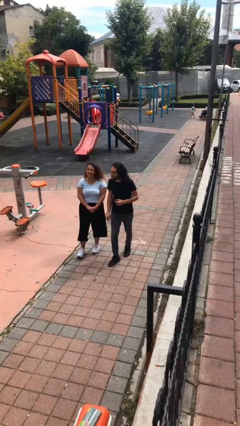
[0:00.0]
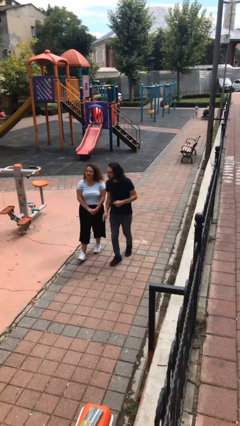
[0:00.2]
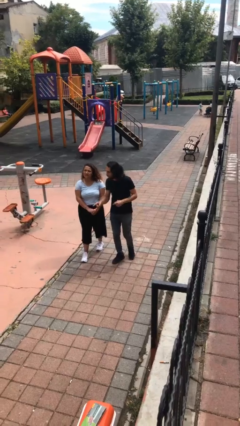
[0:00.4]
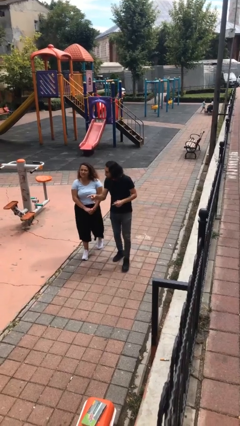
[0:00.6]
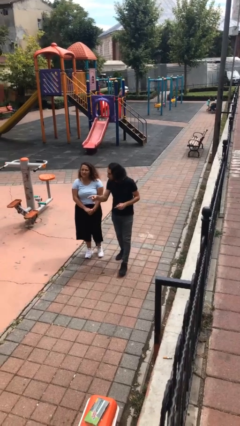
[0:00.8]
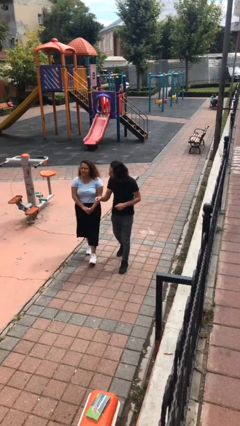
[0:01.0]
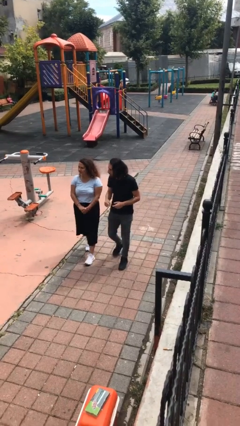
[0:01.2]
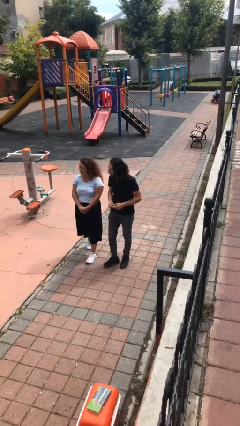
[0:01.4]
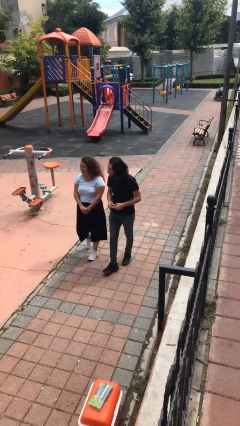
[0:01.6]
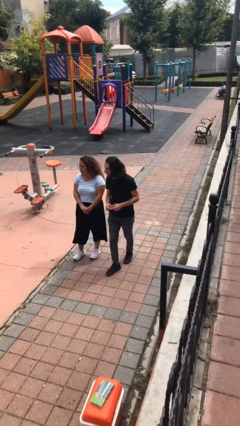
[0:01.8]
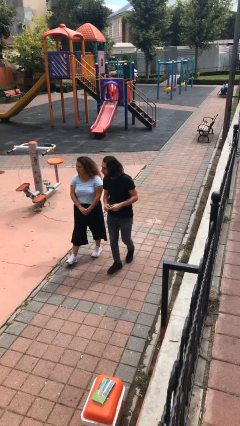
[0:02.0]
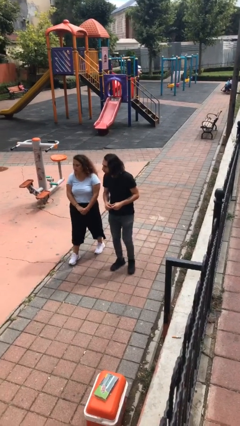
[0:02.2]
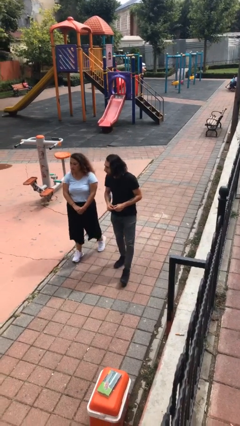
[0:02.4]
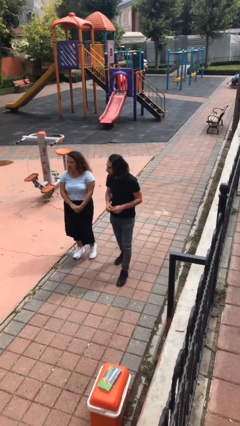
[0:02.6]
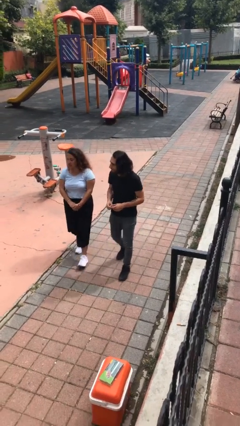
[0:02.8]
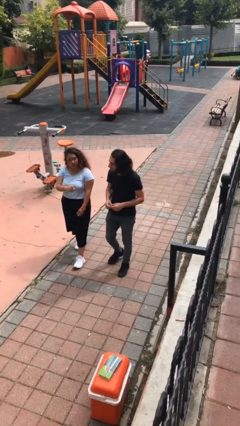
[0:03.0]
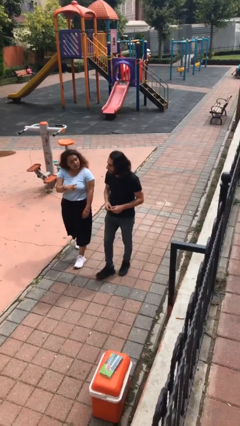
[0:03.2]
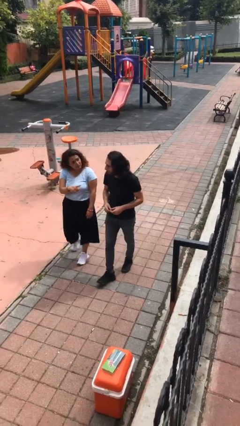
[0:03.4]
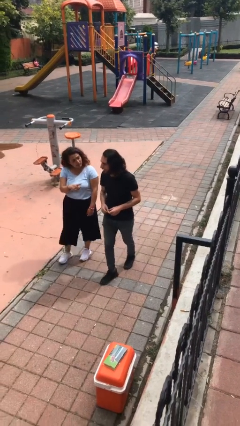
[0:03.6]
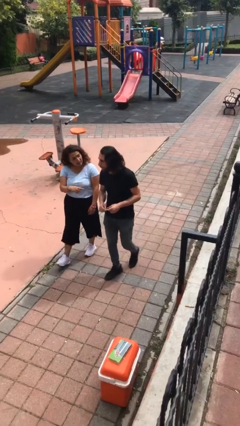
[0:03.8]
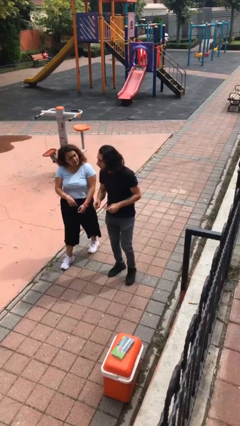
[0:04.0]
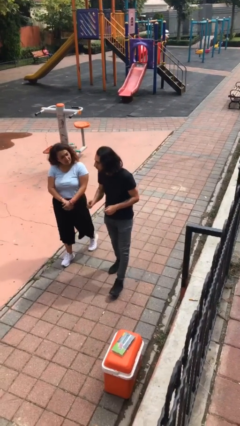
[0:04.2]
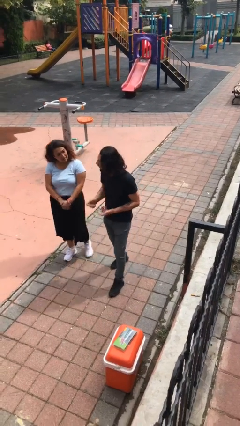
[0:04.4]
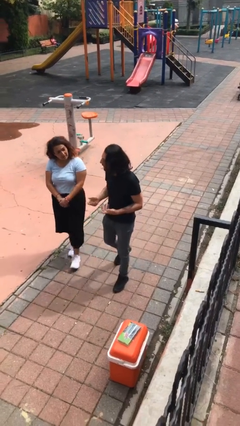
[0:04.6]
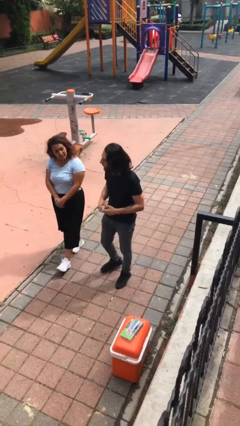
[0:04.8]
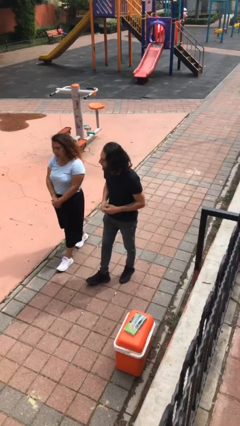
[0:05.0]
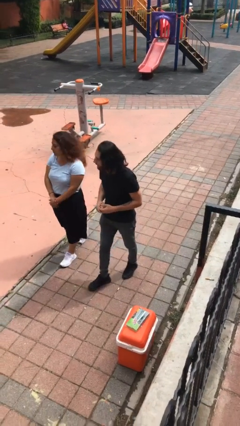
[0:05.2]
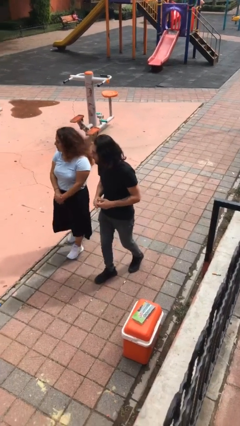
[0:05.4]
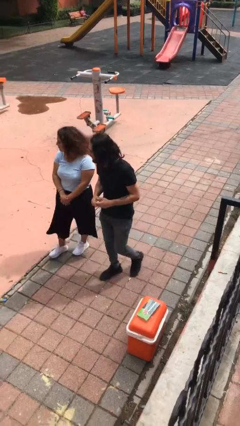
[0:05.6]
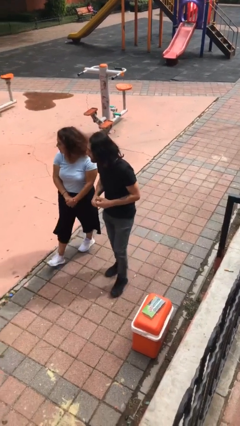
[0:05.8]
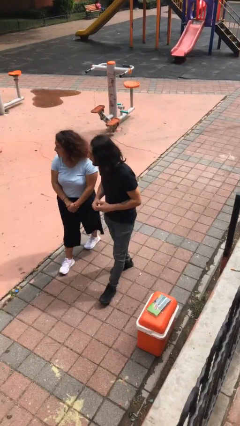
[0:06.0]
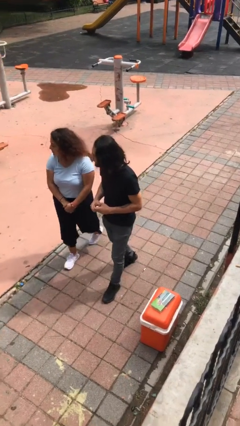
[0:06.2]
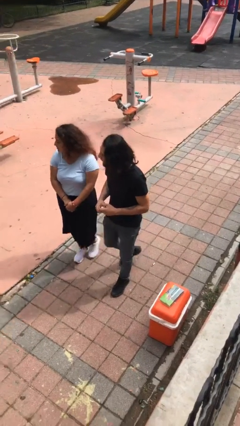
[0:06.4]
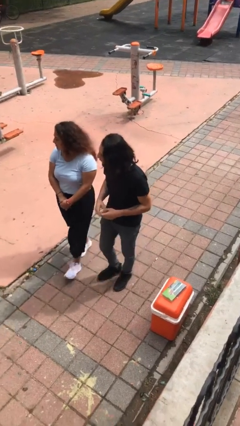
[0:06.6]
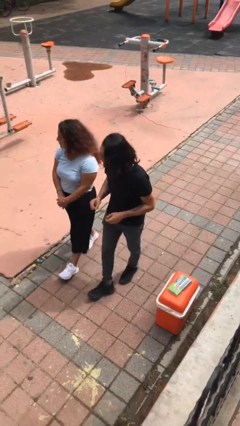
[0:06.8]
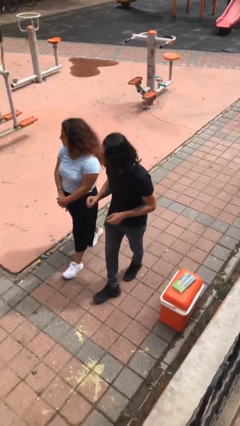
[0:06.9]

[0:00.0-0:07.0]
person talks to person

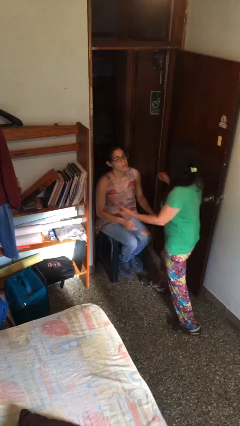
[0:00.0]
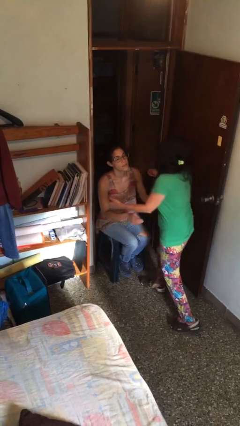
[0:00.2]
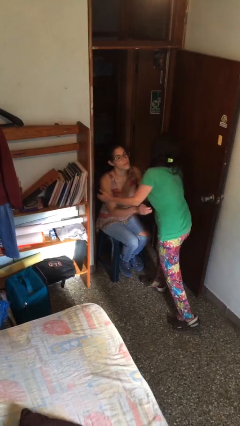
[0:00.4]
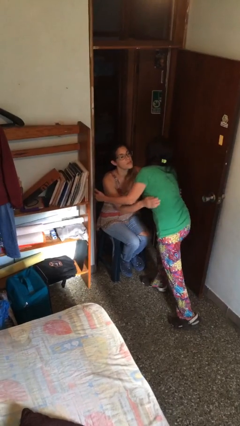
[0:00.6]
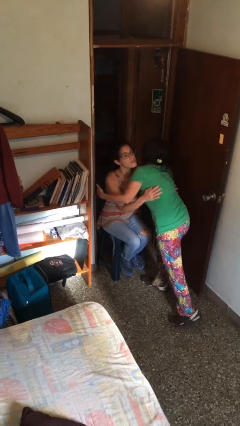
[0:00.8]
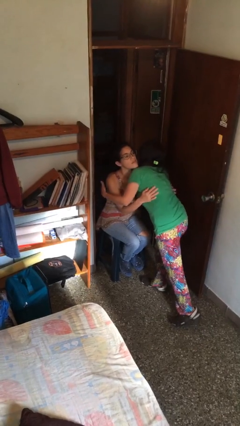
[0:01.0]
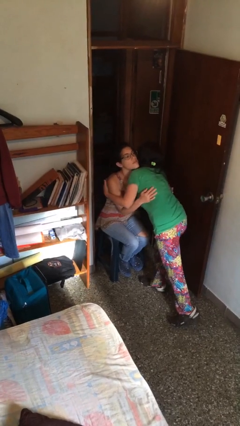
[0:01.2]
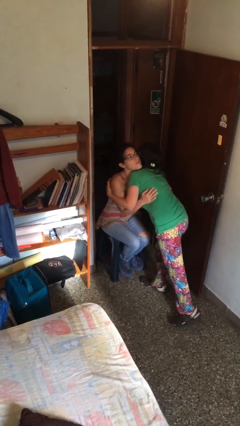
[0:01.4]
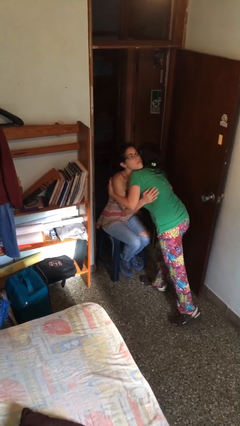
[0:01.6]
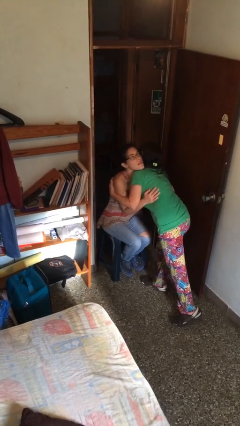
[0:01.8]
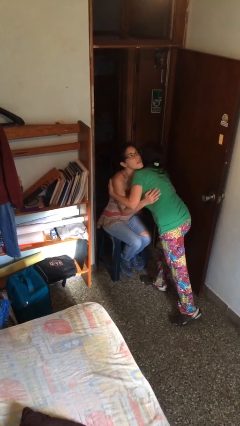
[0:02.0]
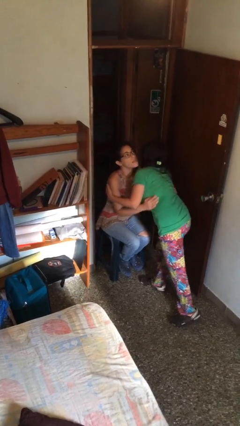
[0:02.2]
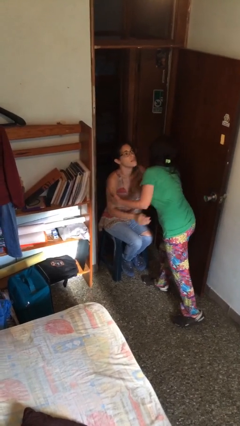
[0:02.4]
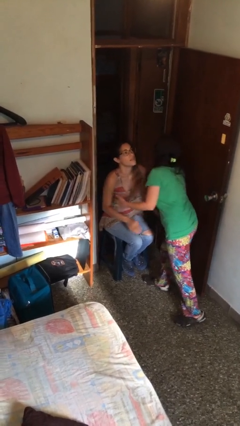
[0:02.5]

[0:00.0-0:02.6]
person embraces person

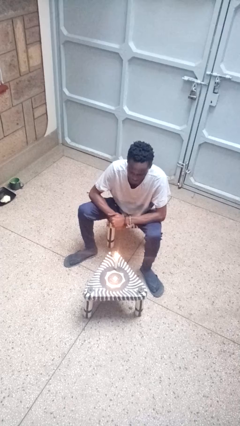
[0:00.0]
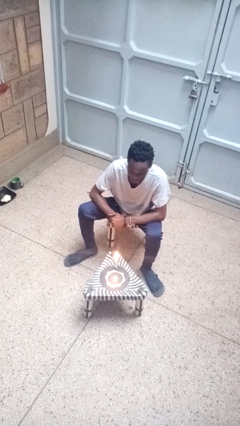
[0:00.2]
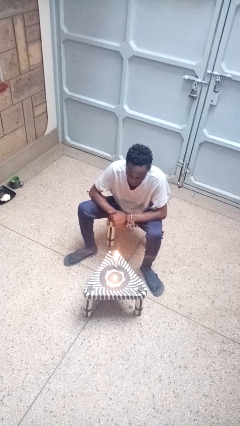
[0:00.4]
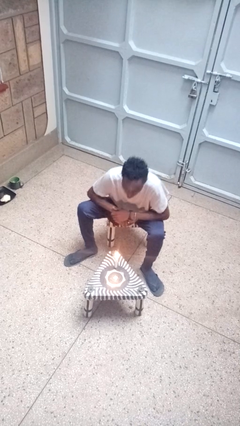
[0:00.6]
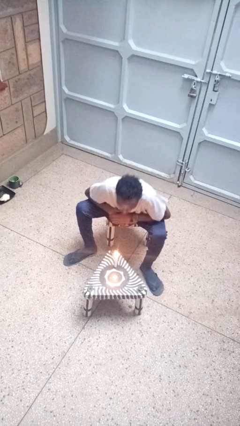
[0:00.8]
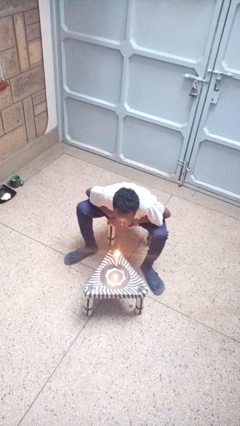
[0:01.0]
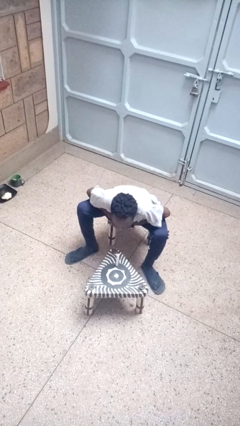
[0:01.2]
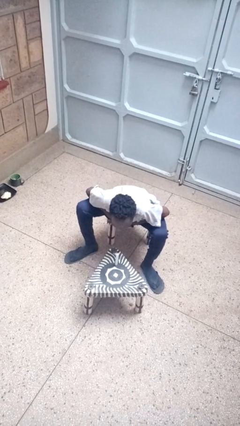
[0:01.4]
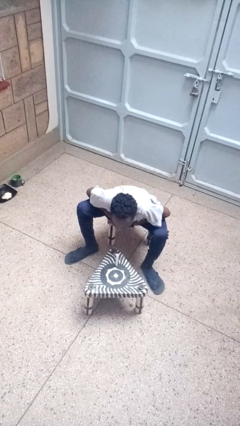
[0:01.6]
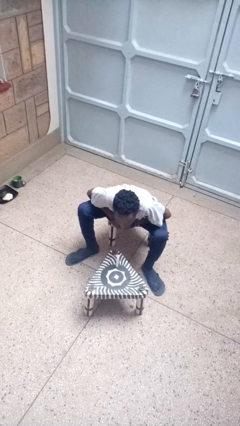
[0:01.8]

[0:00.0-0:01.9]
person extinguishes candle

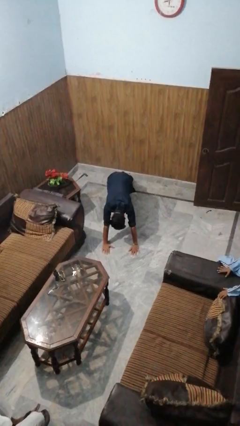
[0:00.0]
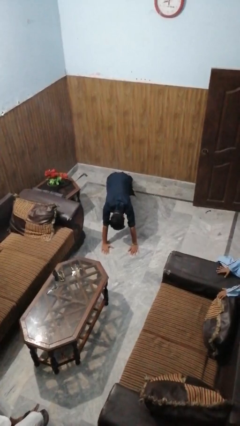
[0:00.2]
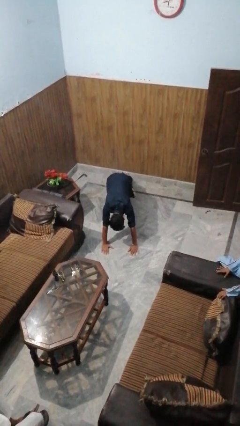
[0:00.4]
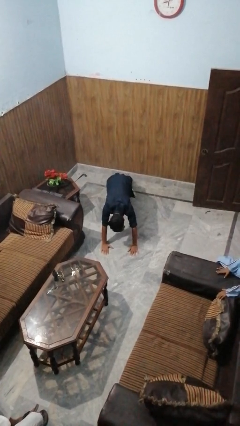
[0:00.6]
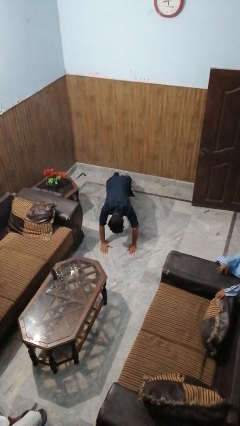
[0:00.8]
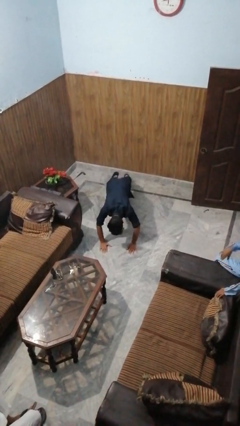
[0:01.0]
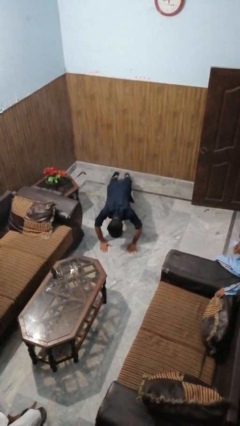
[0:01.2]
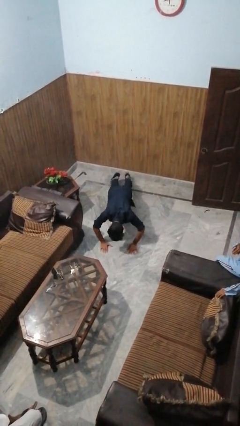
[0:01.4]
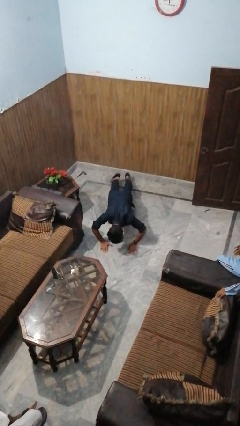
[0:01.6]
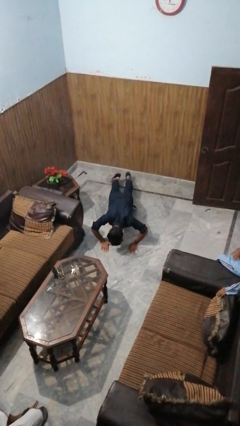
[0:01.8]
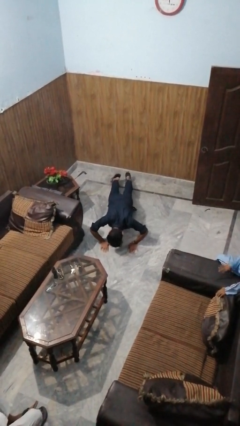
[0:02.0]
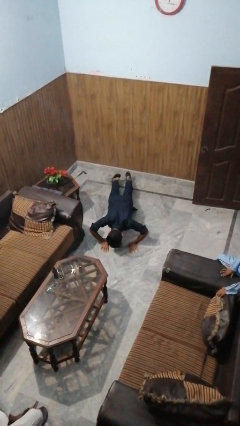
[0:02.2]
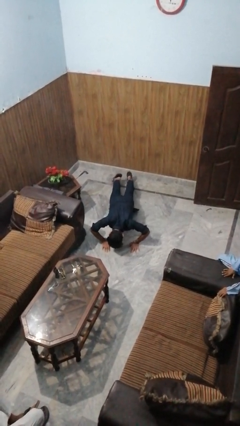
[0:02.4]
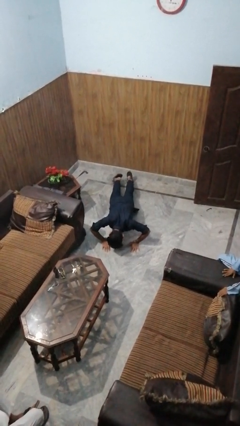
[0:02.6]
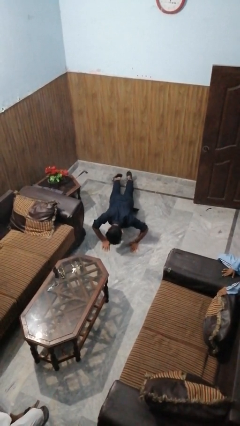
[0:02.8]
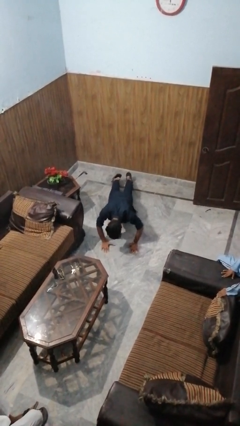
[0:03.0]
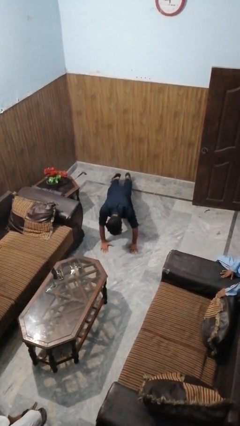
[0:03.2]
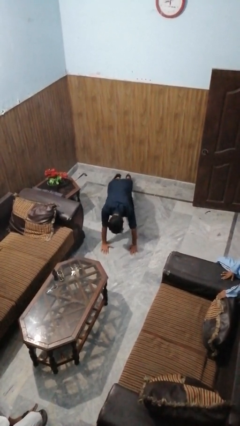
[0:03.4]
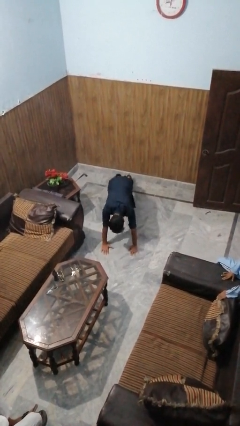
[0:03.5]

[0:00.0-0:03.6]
person exercises with pushup

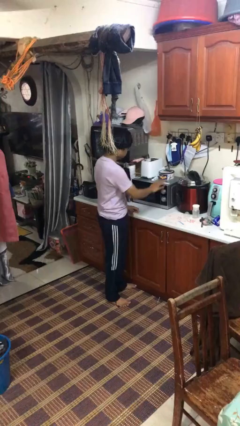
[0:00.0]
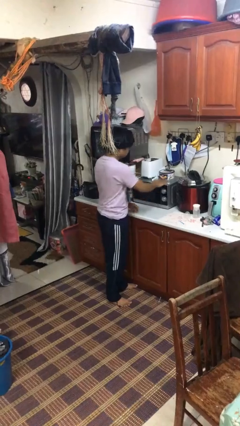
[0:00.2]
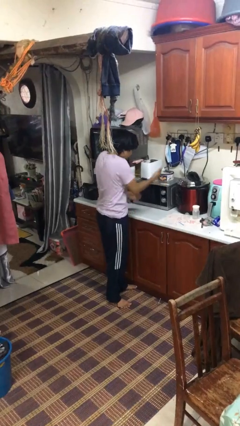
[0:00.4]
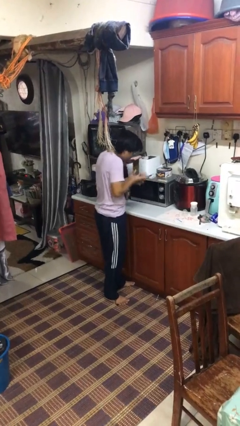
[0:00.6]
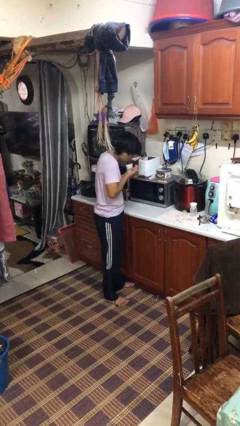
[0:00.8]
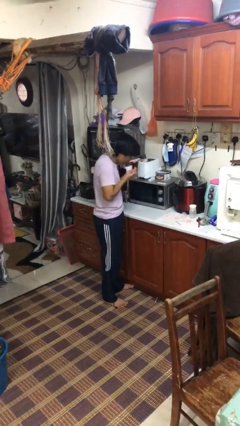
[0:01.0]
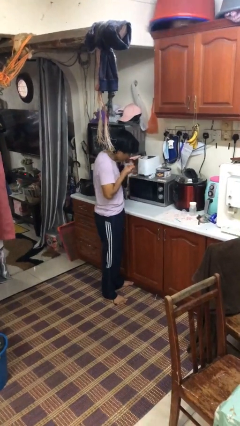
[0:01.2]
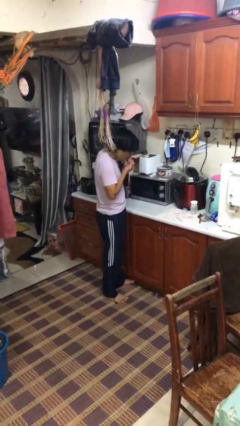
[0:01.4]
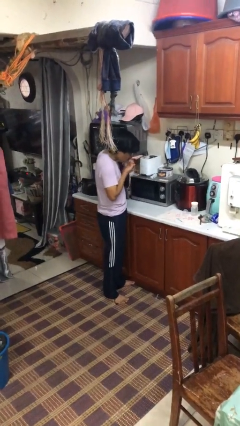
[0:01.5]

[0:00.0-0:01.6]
person burns hand

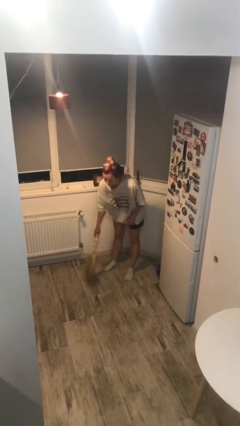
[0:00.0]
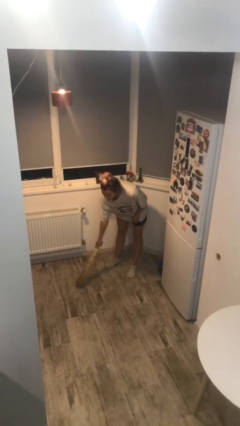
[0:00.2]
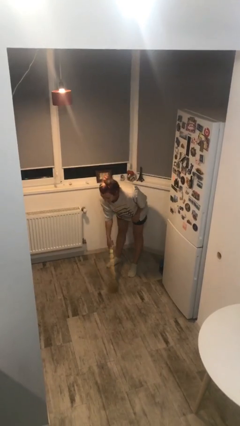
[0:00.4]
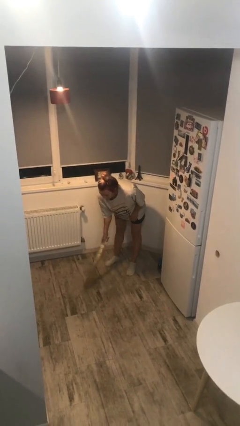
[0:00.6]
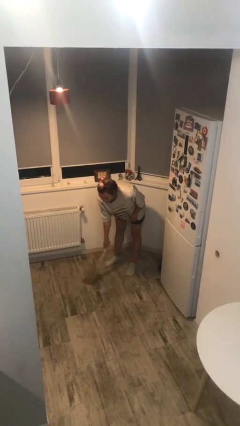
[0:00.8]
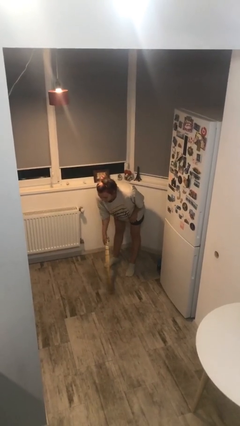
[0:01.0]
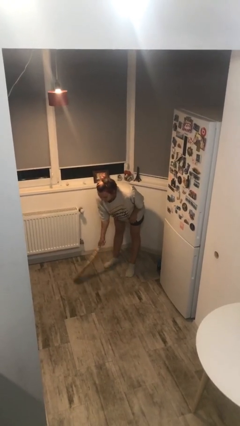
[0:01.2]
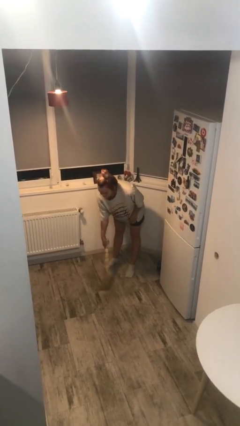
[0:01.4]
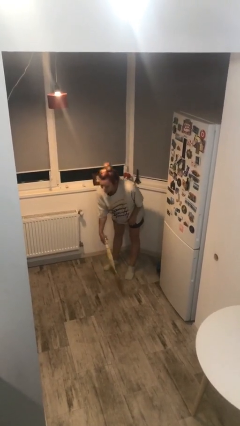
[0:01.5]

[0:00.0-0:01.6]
person sweeps floor
